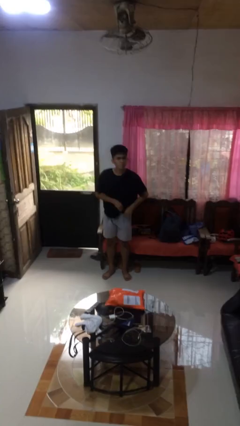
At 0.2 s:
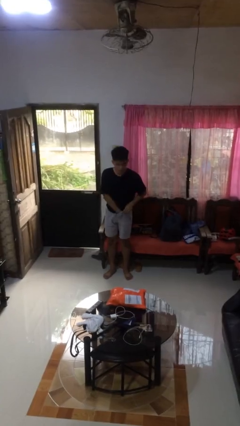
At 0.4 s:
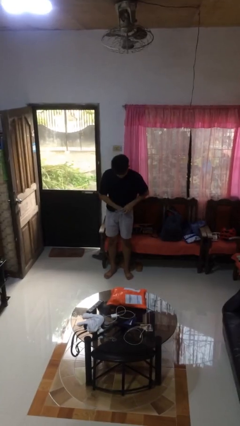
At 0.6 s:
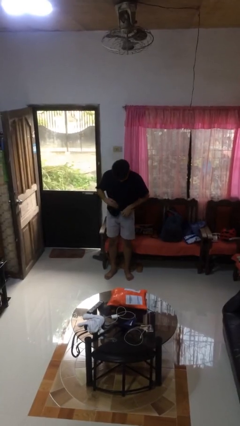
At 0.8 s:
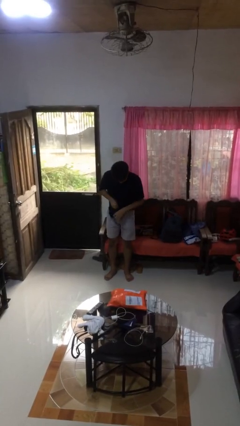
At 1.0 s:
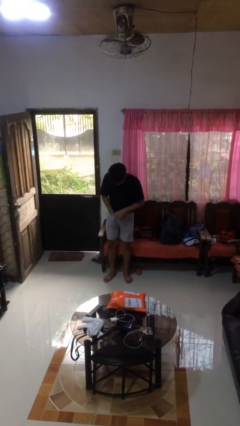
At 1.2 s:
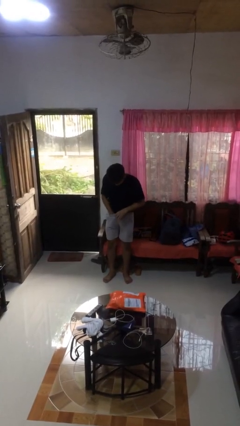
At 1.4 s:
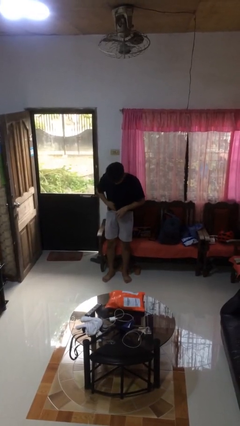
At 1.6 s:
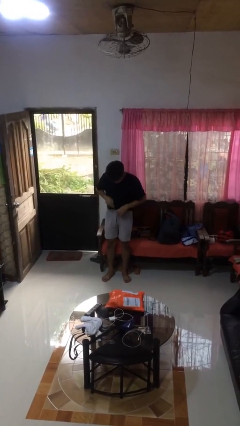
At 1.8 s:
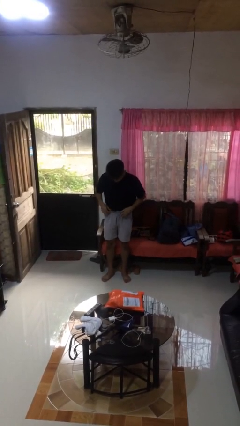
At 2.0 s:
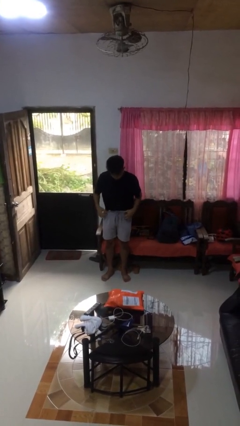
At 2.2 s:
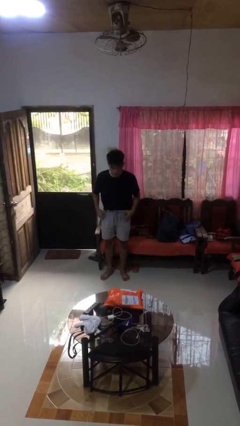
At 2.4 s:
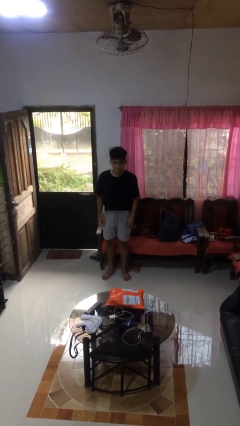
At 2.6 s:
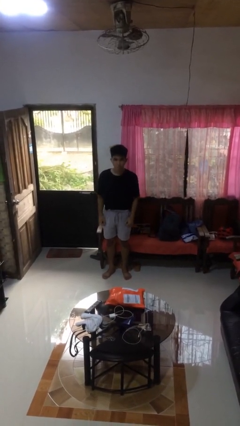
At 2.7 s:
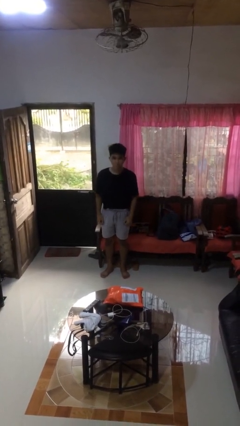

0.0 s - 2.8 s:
person tucks in shirt

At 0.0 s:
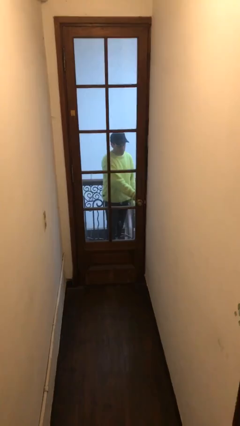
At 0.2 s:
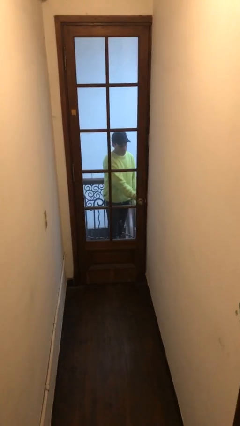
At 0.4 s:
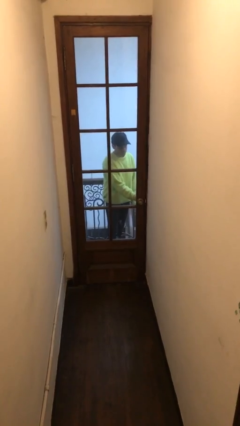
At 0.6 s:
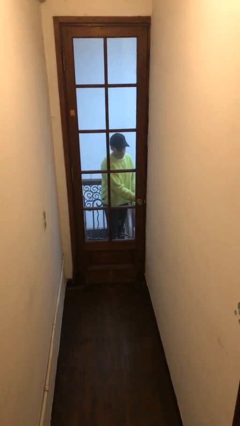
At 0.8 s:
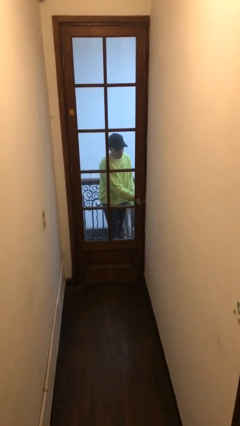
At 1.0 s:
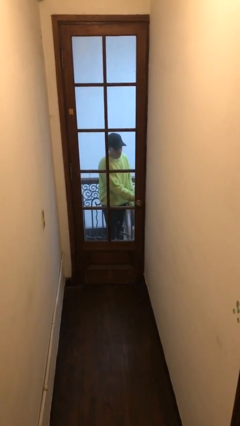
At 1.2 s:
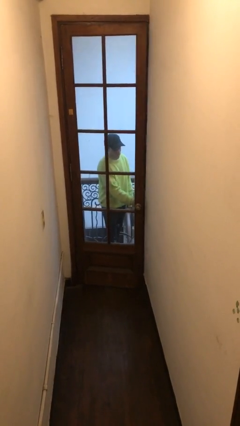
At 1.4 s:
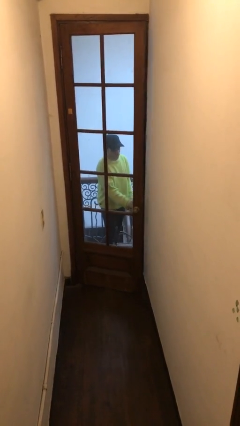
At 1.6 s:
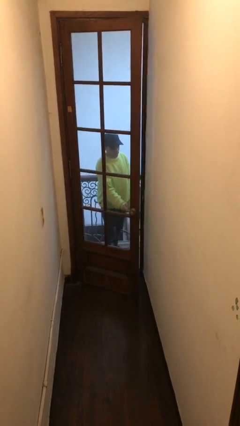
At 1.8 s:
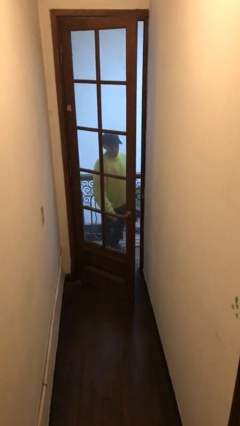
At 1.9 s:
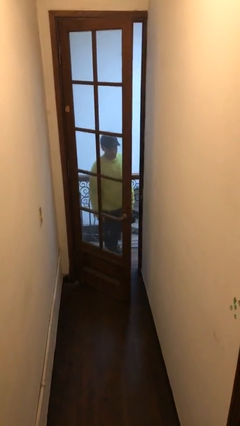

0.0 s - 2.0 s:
person opens facility door

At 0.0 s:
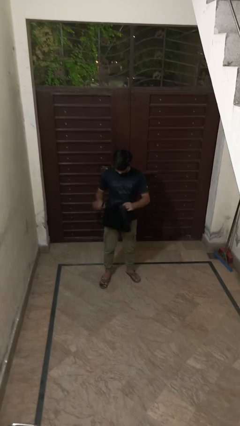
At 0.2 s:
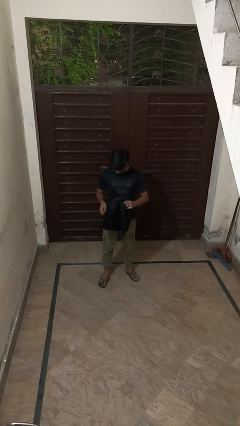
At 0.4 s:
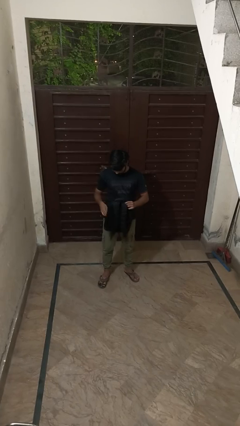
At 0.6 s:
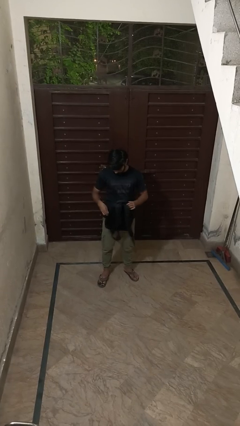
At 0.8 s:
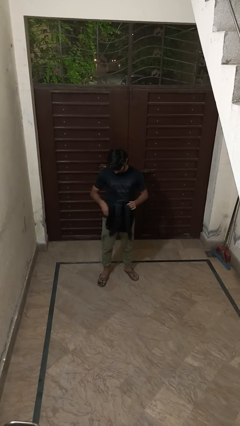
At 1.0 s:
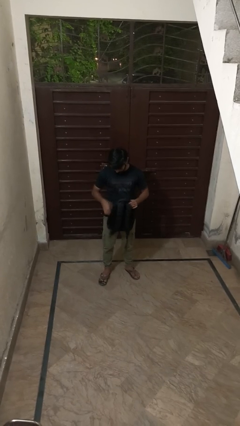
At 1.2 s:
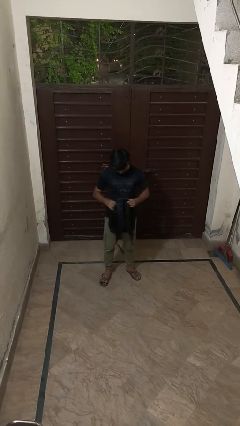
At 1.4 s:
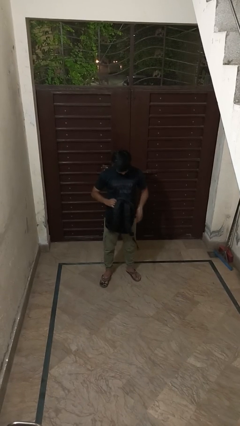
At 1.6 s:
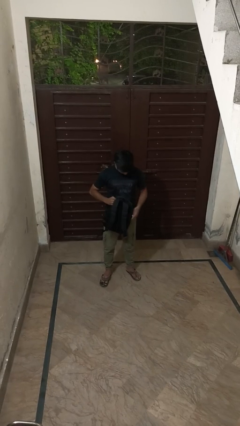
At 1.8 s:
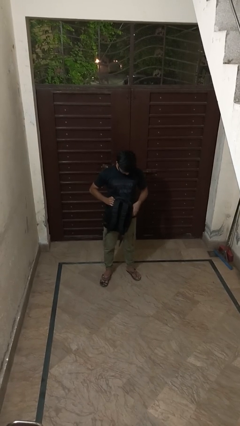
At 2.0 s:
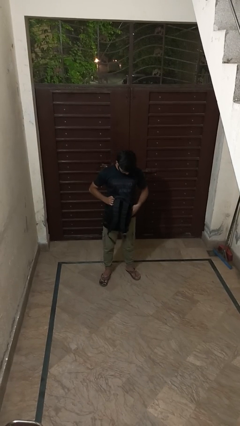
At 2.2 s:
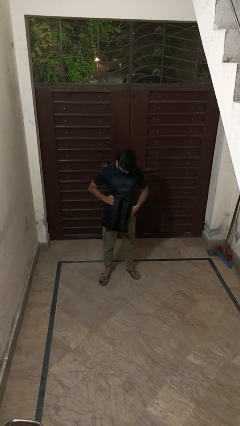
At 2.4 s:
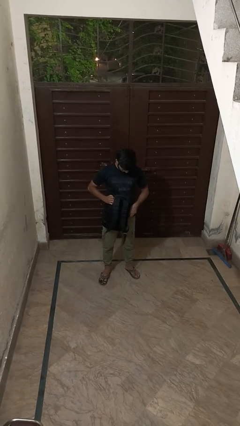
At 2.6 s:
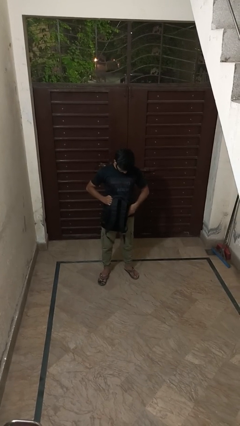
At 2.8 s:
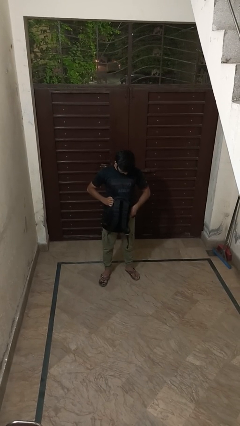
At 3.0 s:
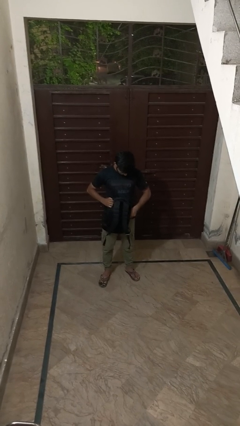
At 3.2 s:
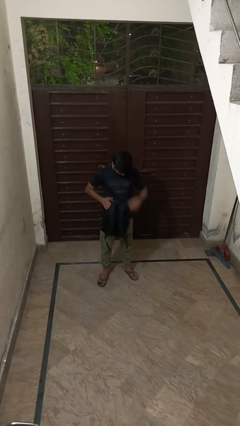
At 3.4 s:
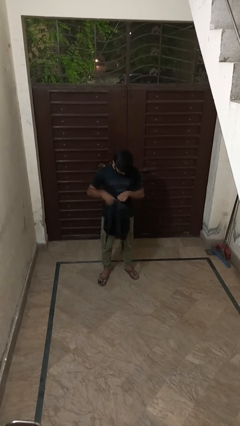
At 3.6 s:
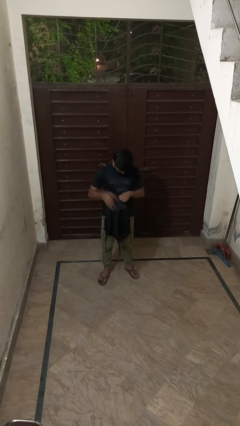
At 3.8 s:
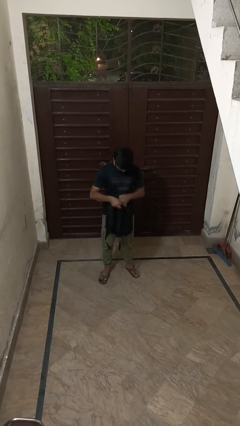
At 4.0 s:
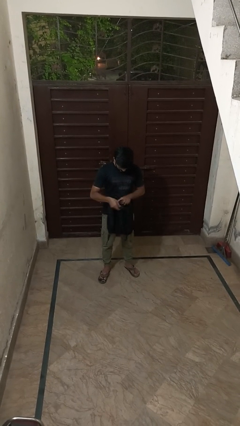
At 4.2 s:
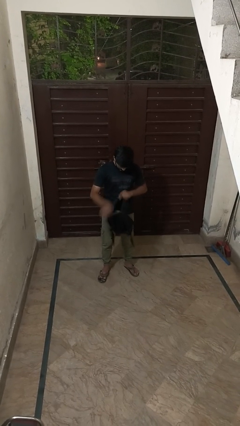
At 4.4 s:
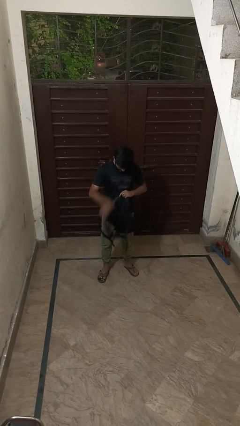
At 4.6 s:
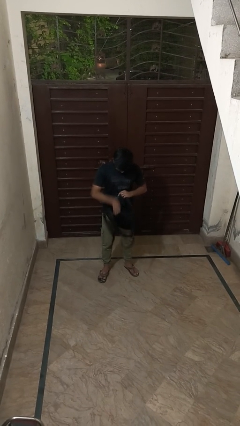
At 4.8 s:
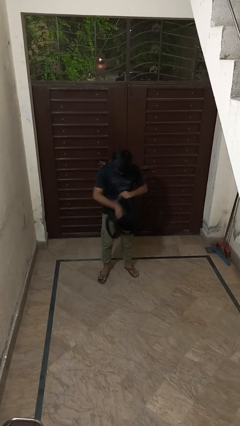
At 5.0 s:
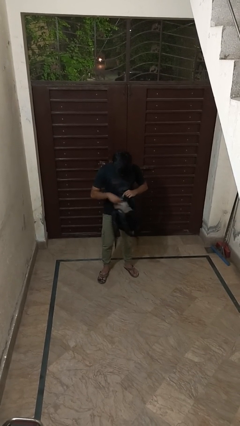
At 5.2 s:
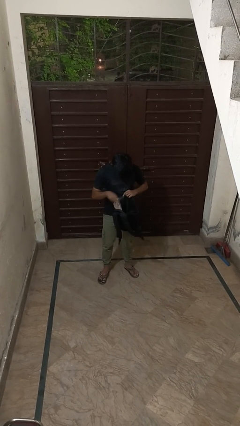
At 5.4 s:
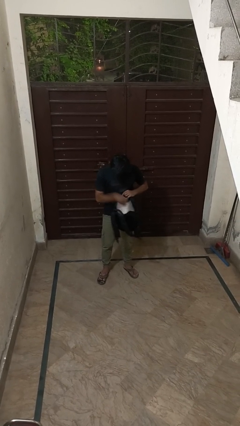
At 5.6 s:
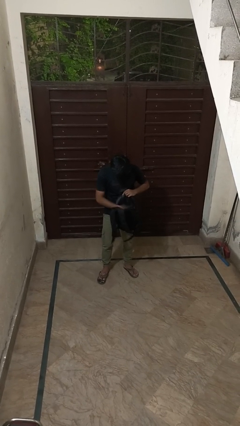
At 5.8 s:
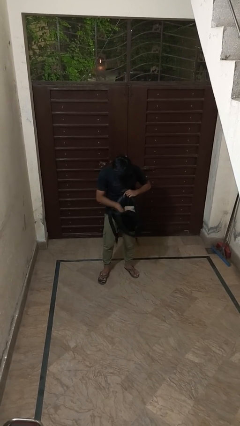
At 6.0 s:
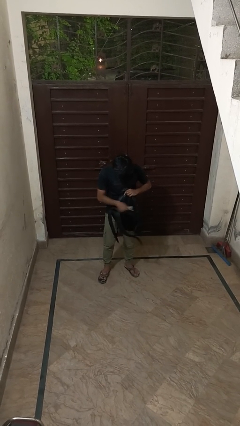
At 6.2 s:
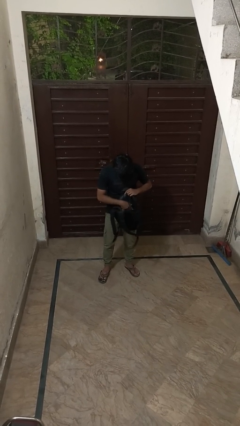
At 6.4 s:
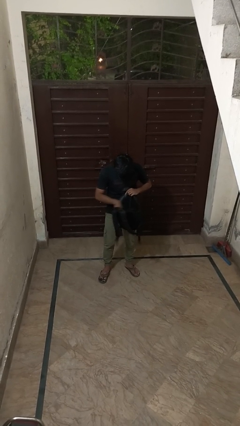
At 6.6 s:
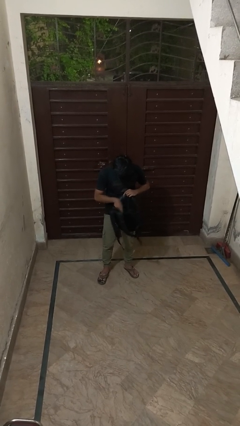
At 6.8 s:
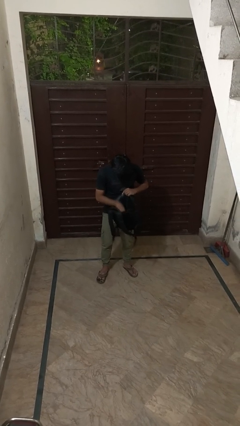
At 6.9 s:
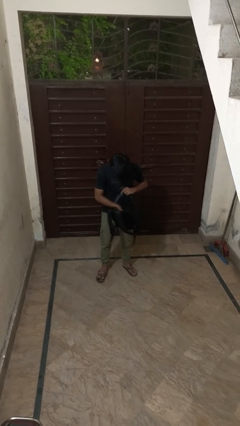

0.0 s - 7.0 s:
person searches in backpack

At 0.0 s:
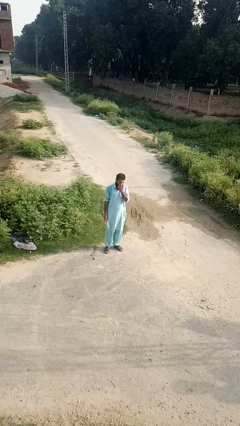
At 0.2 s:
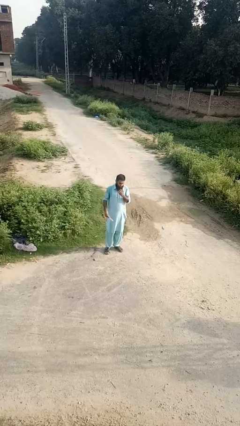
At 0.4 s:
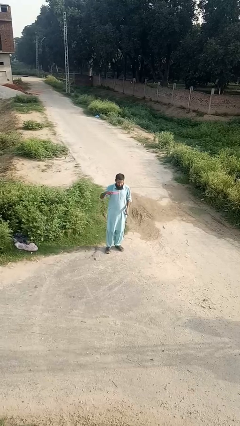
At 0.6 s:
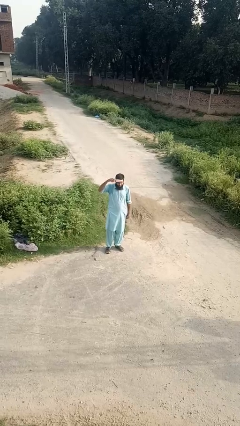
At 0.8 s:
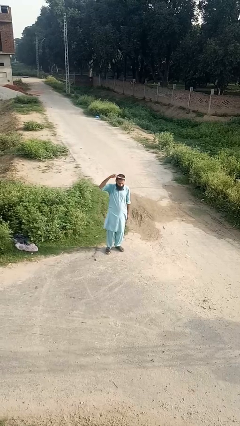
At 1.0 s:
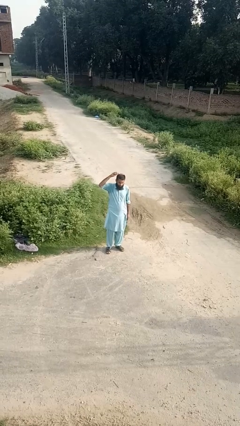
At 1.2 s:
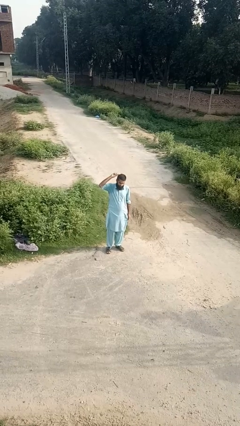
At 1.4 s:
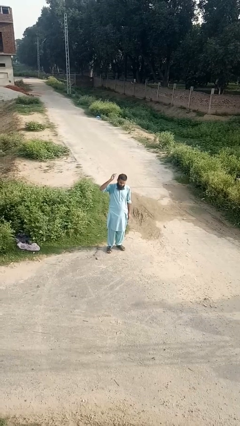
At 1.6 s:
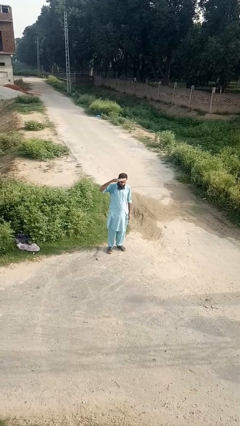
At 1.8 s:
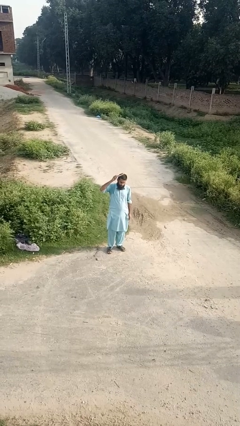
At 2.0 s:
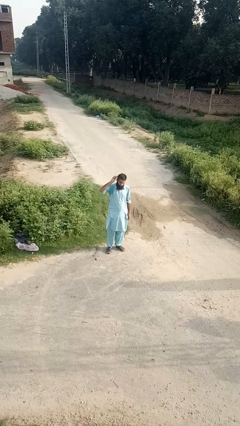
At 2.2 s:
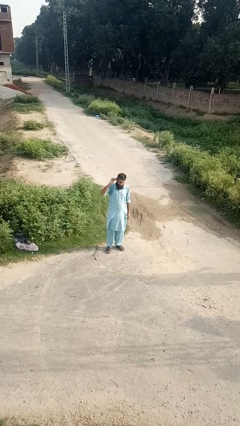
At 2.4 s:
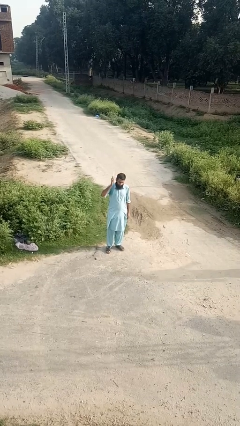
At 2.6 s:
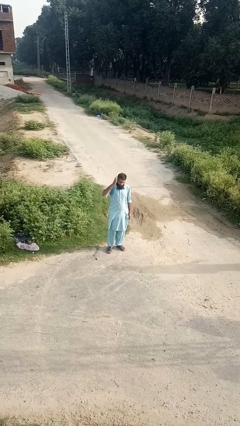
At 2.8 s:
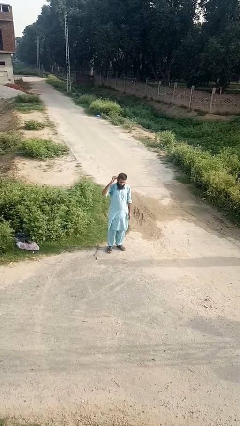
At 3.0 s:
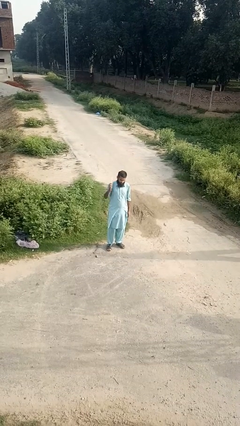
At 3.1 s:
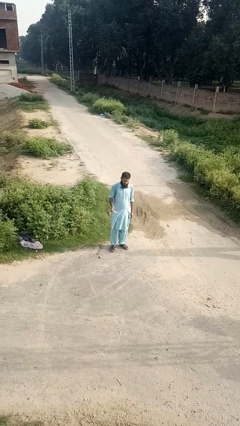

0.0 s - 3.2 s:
person brushes hair

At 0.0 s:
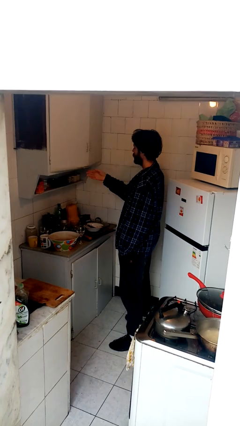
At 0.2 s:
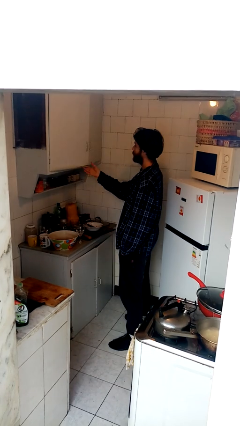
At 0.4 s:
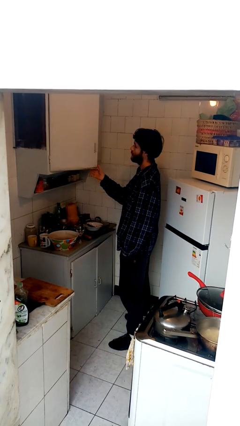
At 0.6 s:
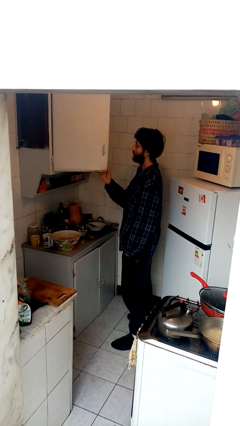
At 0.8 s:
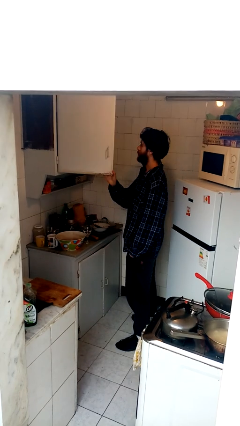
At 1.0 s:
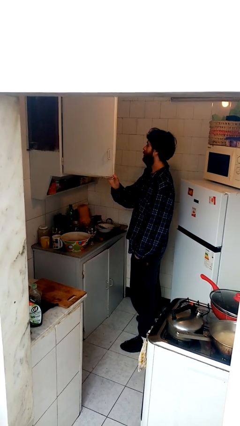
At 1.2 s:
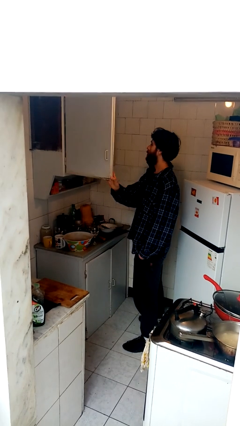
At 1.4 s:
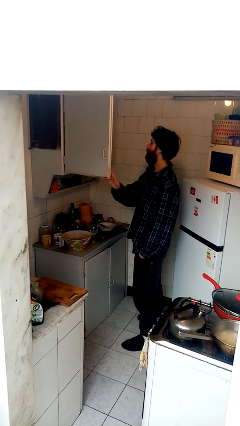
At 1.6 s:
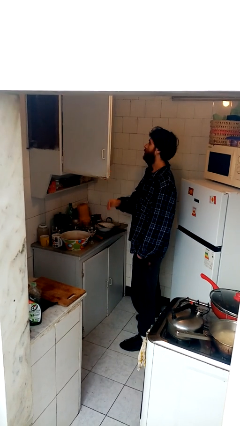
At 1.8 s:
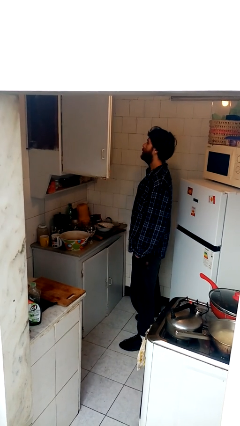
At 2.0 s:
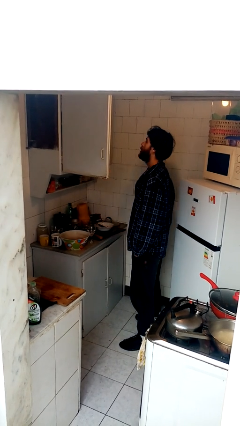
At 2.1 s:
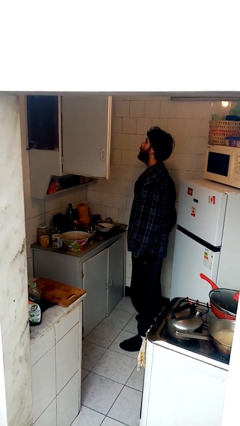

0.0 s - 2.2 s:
person opens cabinet

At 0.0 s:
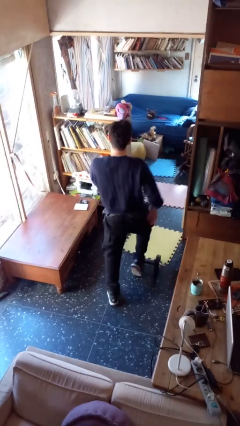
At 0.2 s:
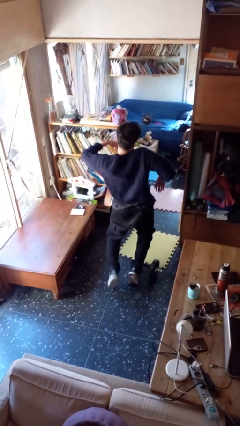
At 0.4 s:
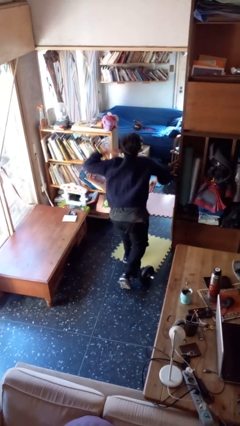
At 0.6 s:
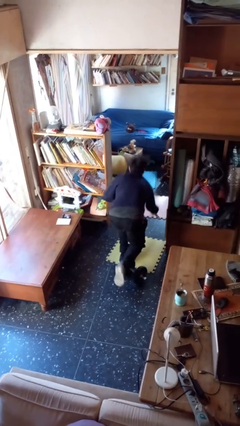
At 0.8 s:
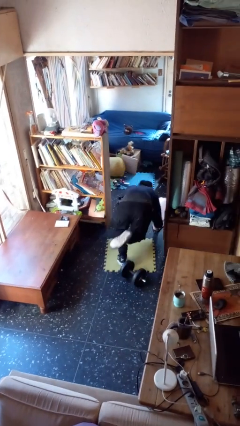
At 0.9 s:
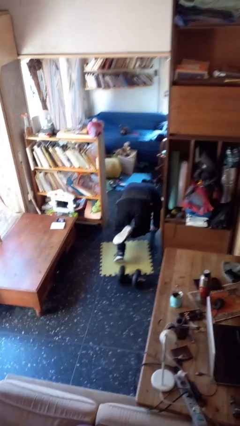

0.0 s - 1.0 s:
person trips on object on floor
